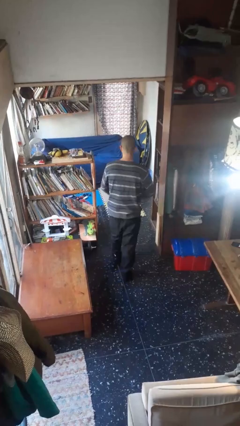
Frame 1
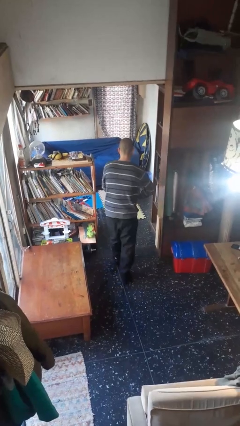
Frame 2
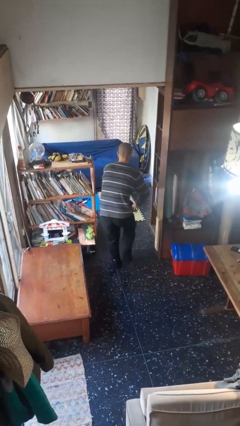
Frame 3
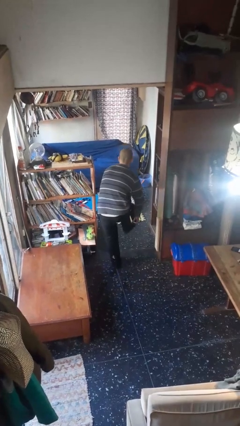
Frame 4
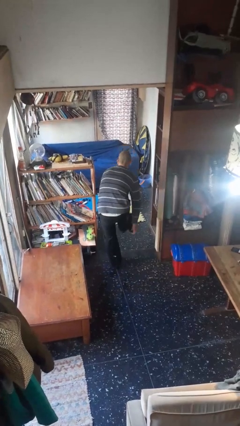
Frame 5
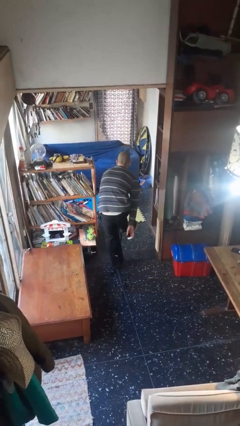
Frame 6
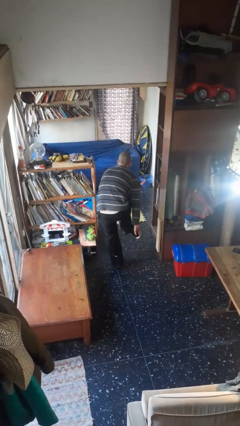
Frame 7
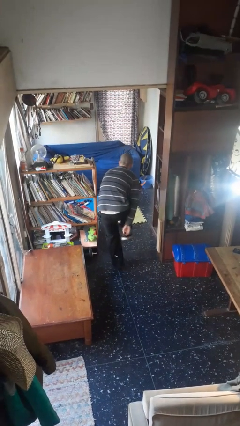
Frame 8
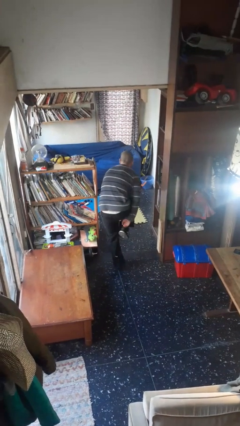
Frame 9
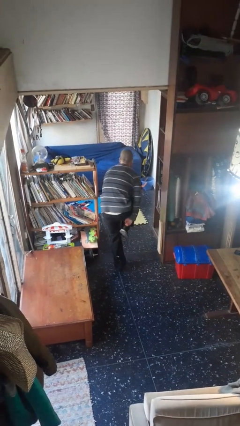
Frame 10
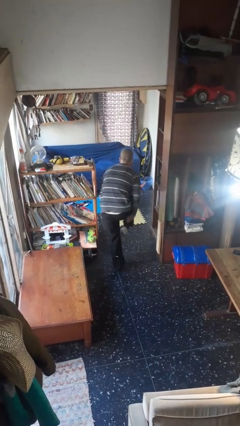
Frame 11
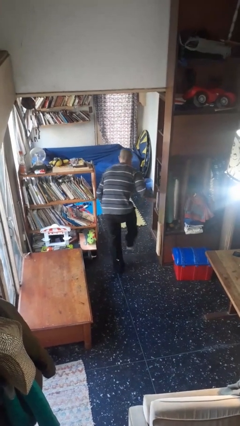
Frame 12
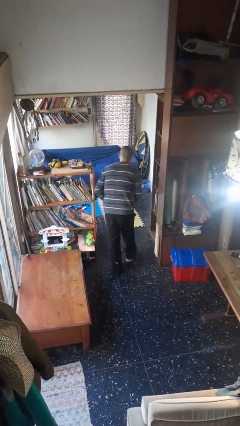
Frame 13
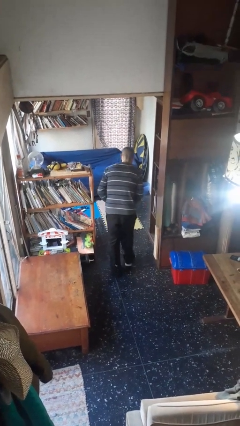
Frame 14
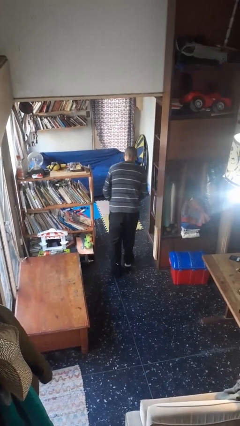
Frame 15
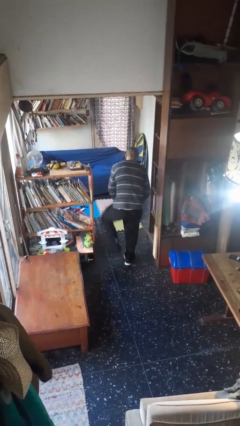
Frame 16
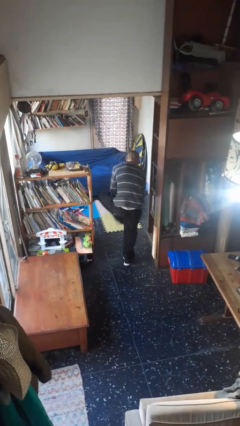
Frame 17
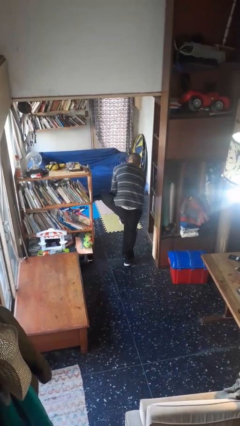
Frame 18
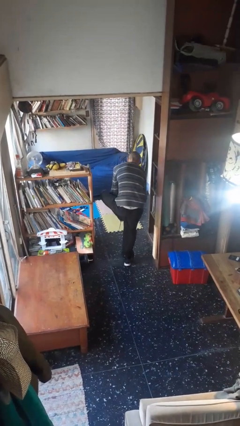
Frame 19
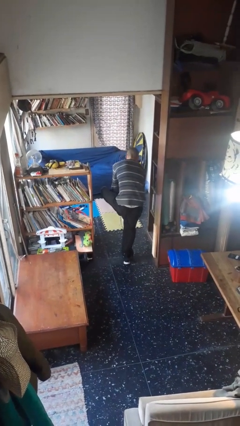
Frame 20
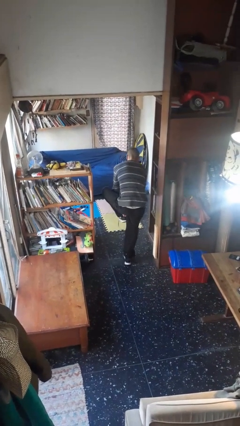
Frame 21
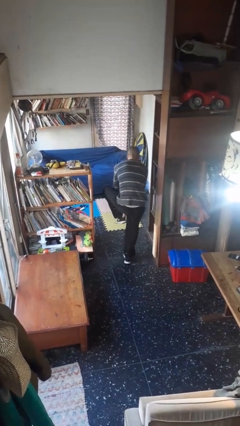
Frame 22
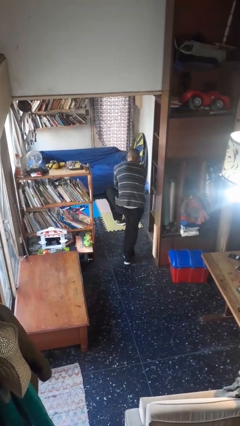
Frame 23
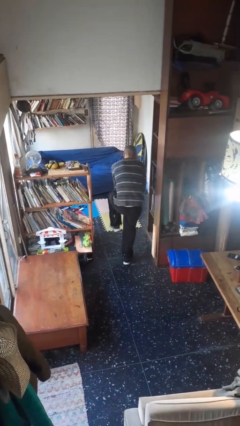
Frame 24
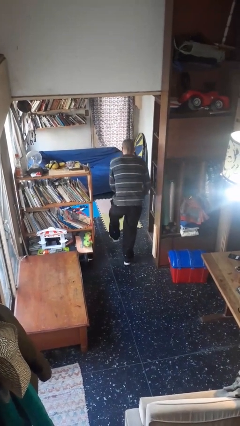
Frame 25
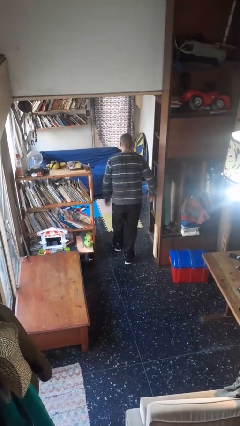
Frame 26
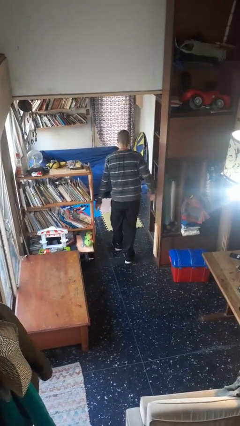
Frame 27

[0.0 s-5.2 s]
person puts on shoes

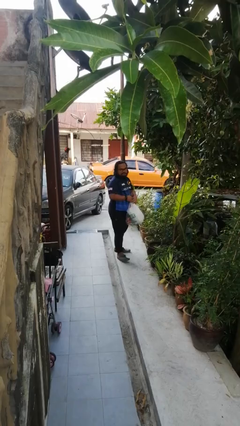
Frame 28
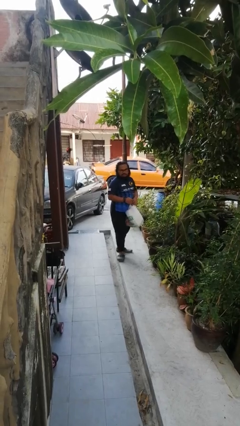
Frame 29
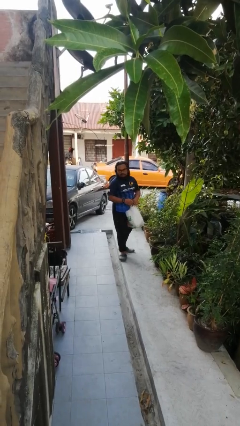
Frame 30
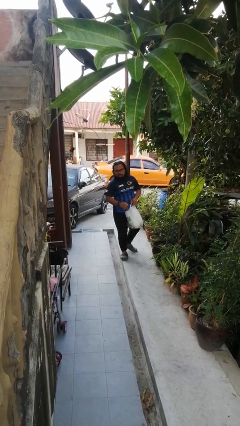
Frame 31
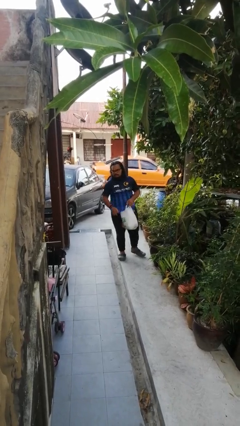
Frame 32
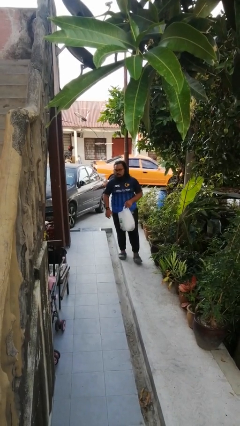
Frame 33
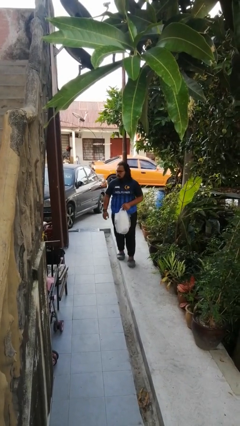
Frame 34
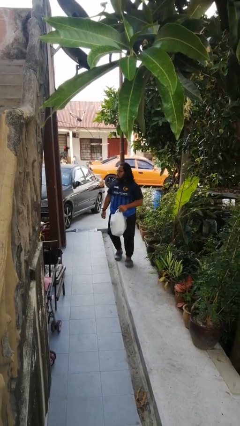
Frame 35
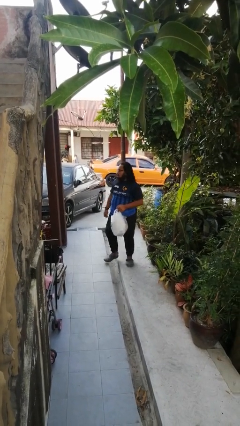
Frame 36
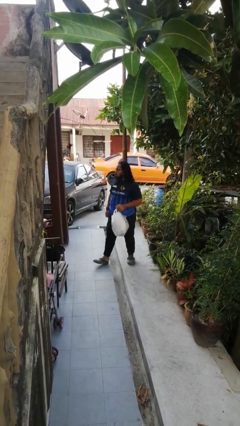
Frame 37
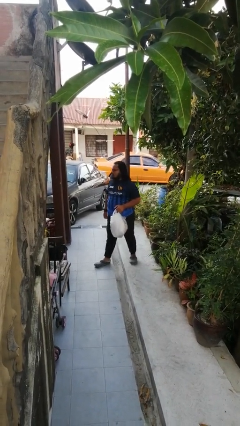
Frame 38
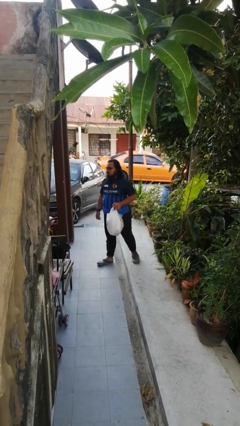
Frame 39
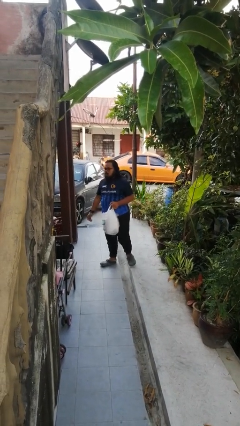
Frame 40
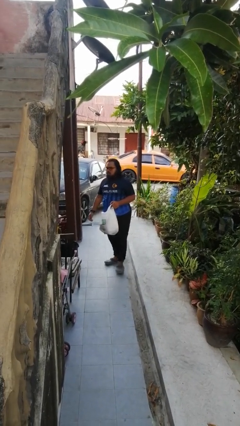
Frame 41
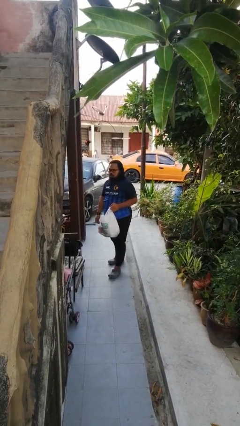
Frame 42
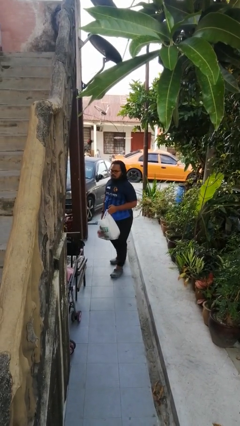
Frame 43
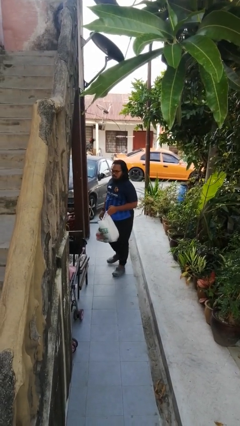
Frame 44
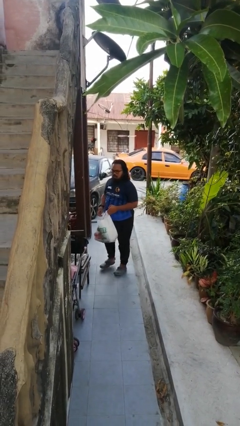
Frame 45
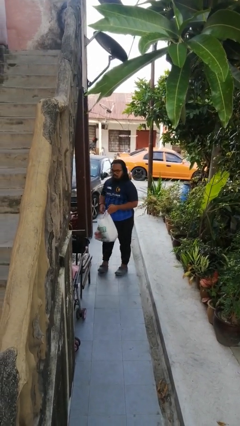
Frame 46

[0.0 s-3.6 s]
person carries groceries

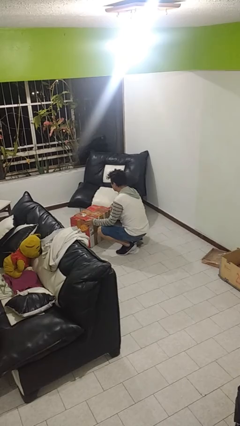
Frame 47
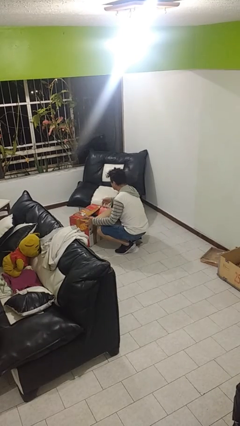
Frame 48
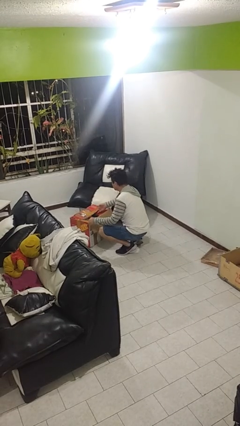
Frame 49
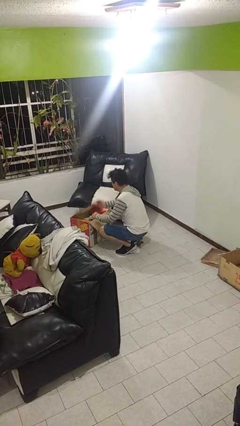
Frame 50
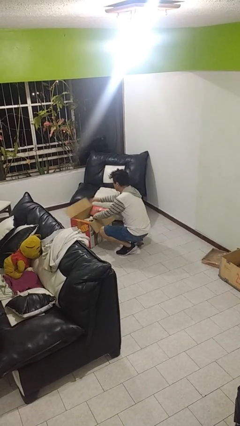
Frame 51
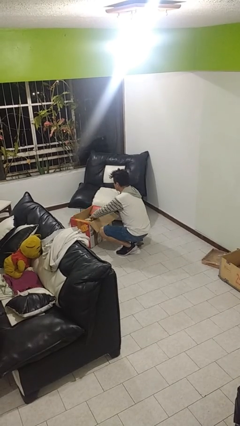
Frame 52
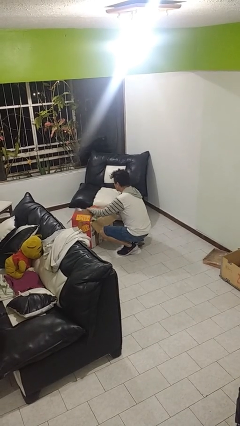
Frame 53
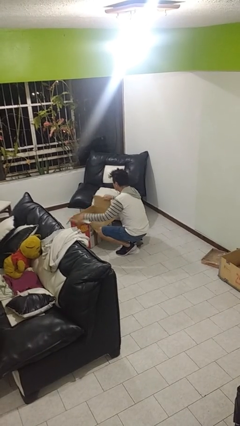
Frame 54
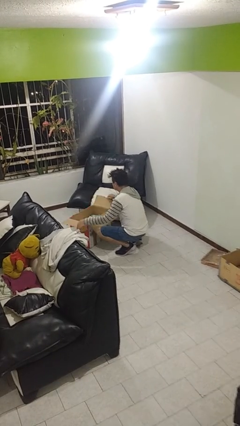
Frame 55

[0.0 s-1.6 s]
person opens box

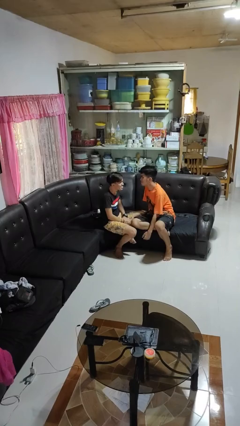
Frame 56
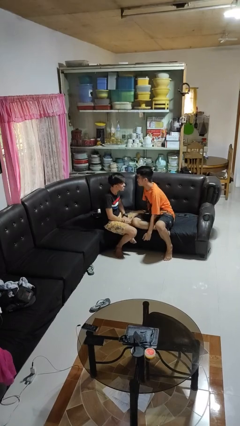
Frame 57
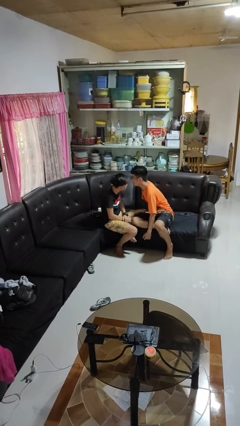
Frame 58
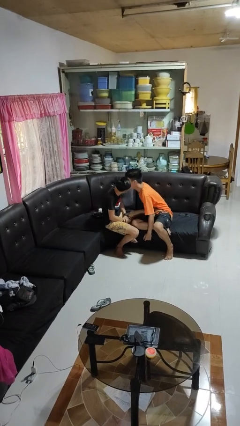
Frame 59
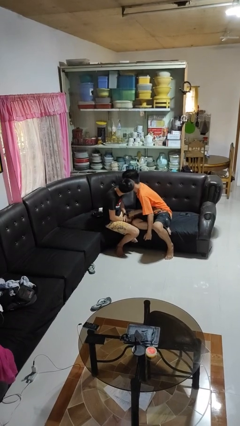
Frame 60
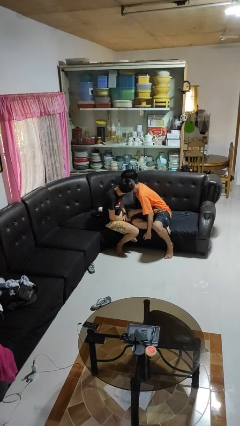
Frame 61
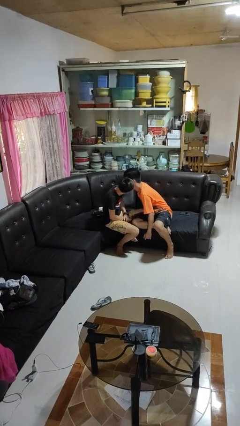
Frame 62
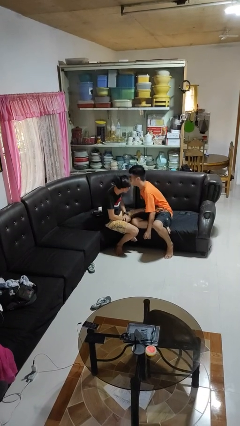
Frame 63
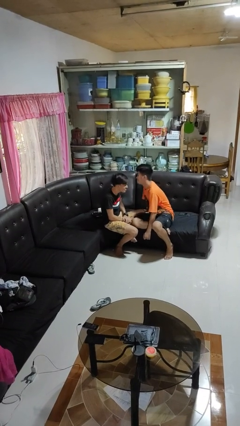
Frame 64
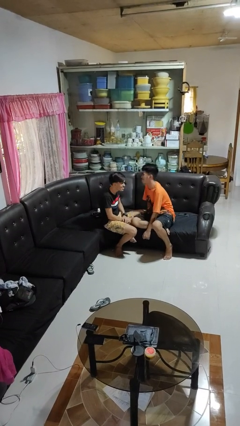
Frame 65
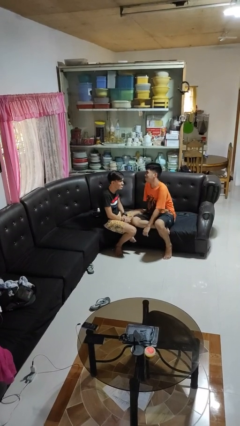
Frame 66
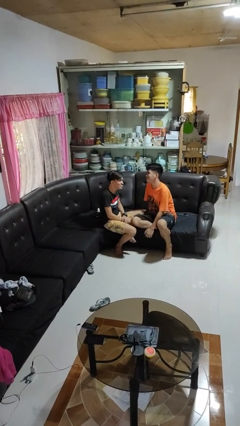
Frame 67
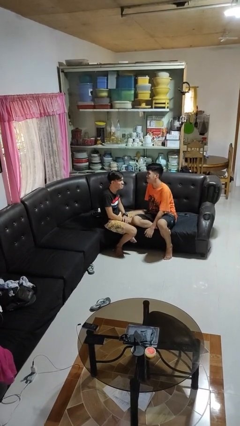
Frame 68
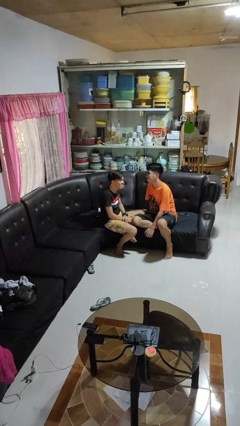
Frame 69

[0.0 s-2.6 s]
person kisses cheek of person

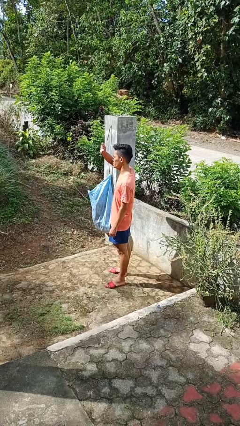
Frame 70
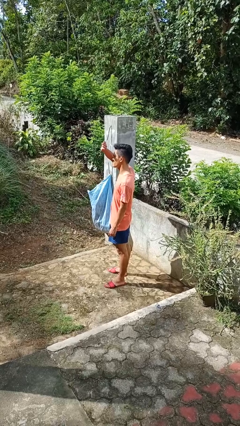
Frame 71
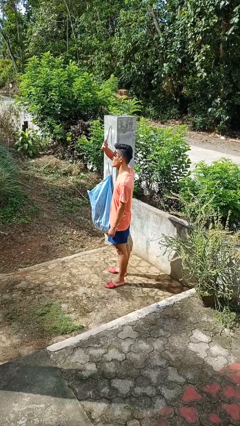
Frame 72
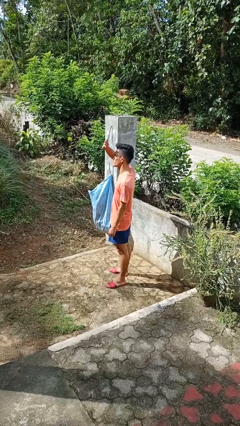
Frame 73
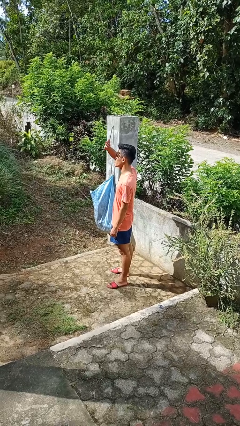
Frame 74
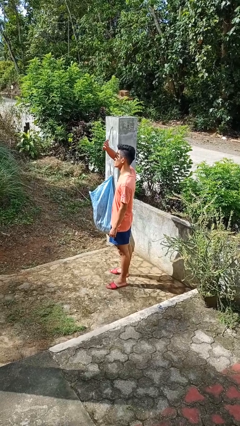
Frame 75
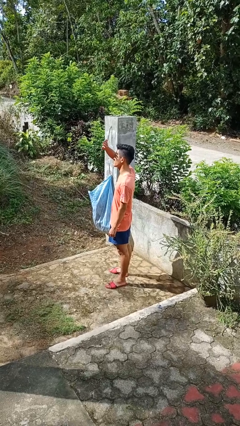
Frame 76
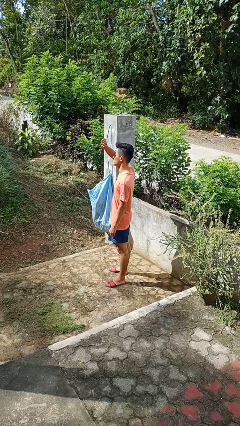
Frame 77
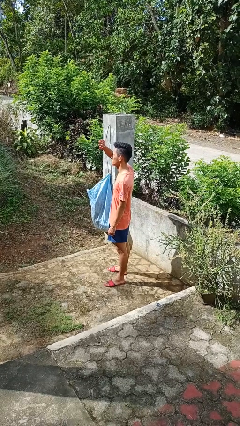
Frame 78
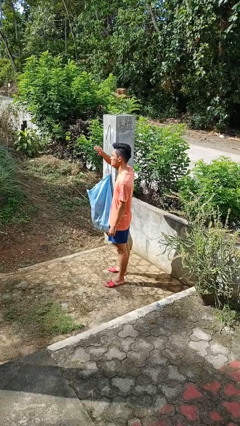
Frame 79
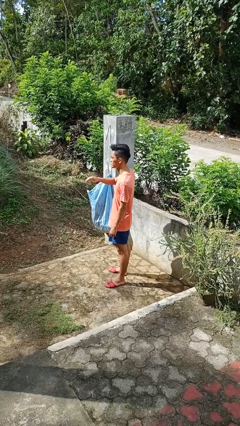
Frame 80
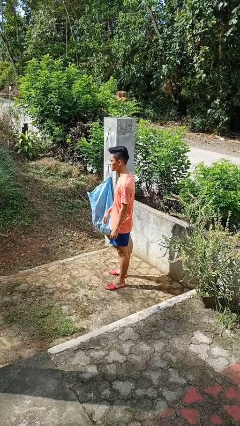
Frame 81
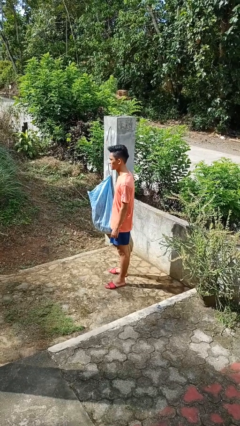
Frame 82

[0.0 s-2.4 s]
person shades eyes

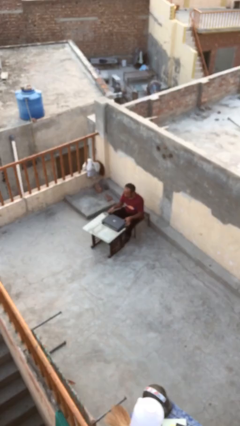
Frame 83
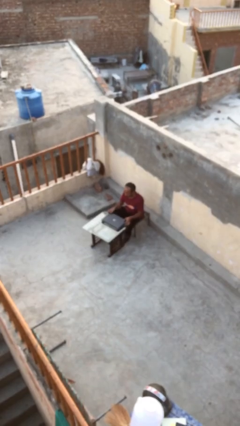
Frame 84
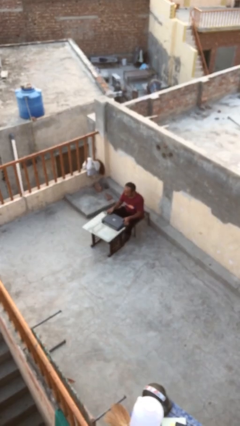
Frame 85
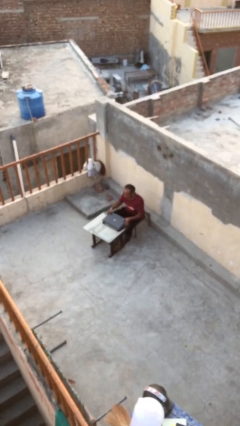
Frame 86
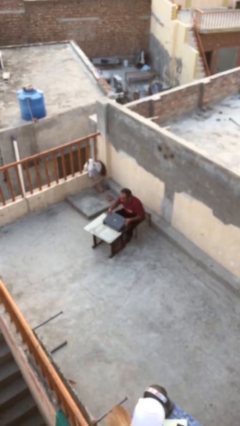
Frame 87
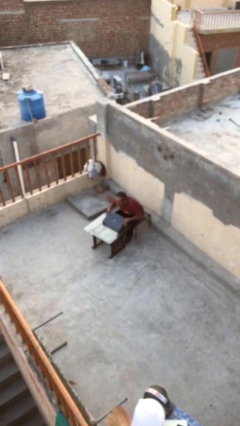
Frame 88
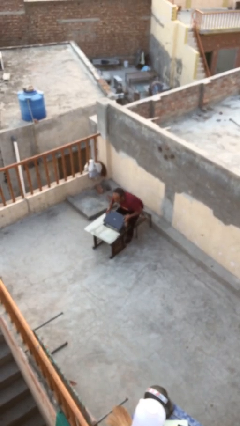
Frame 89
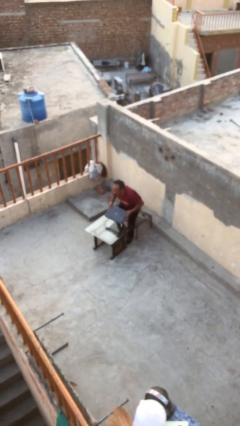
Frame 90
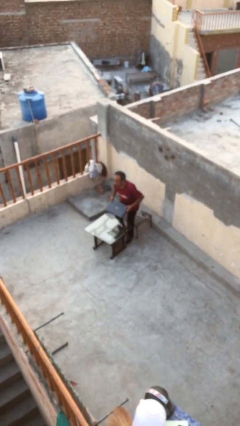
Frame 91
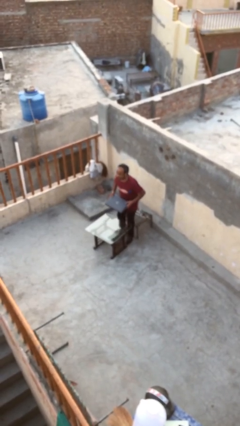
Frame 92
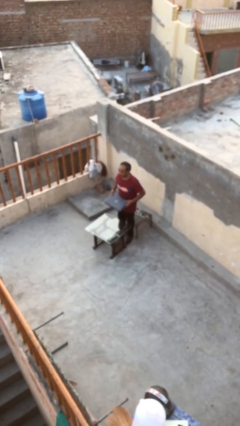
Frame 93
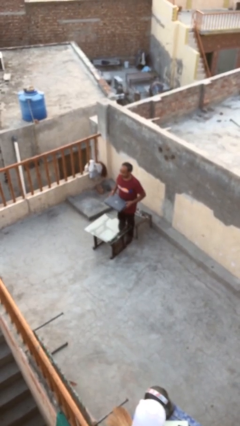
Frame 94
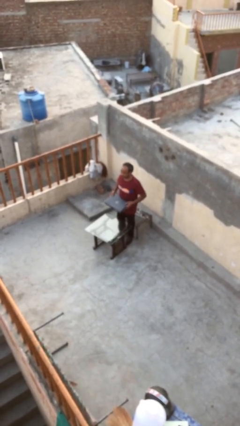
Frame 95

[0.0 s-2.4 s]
person stands up
